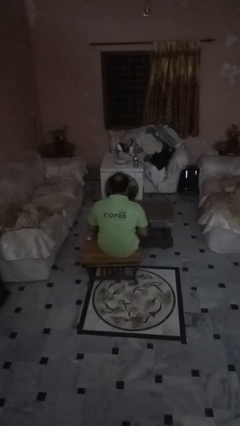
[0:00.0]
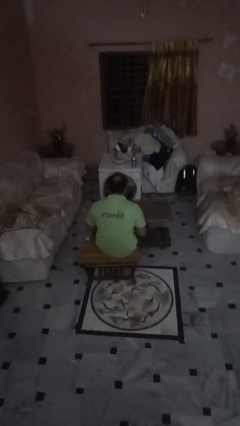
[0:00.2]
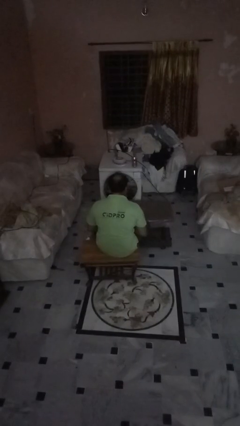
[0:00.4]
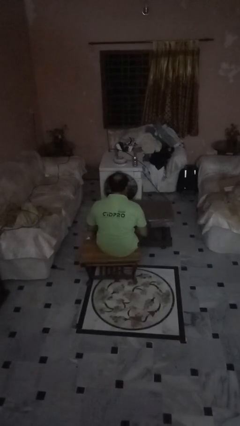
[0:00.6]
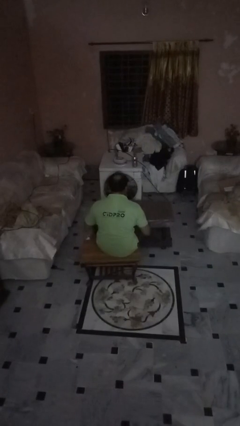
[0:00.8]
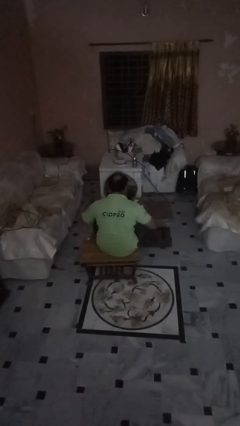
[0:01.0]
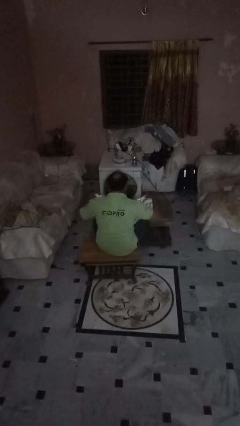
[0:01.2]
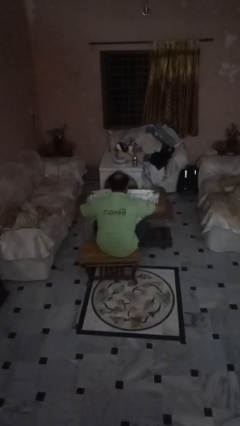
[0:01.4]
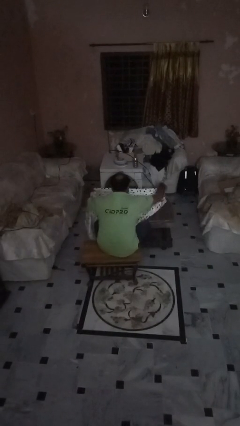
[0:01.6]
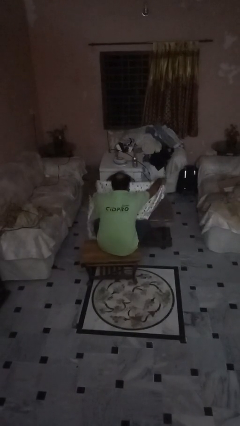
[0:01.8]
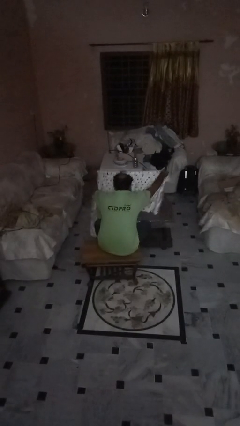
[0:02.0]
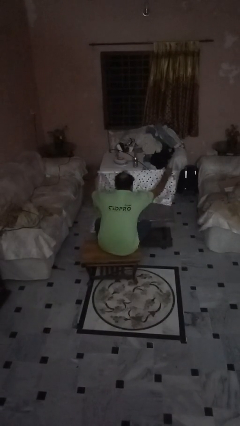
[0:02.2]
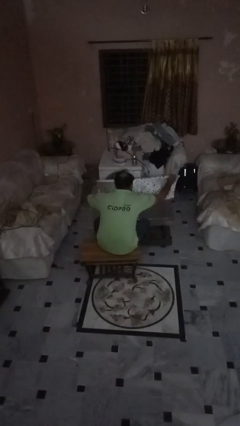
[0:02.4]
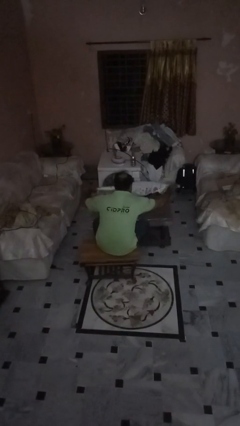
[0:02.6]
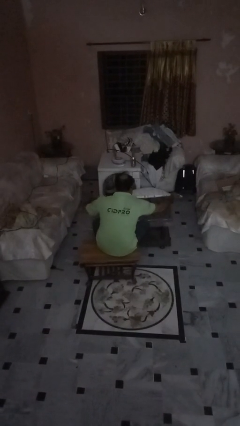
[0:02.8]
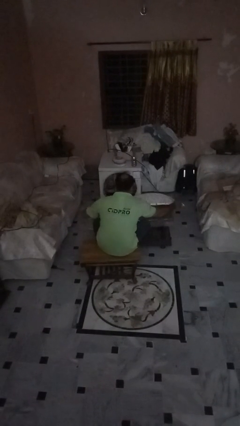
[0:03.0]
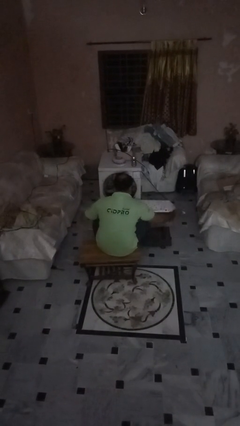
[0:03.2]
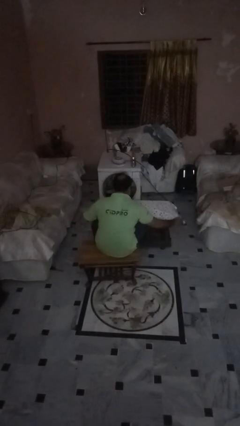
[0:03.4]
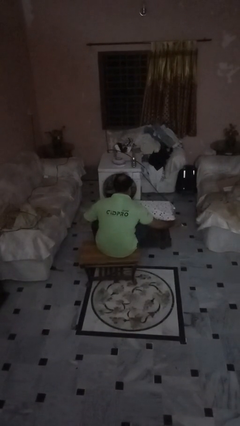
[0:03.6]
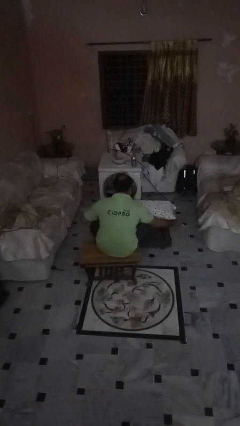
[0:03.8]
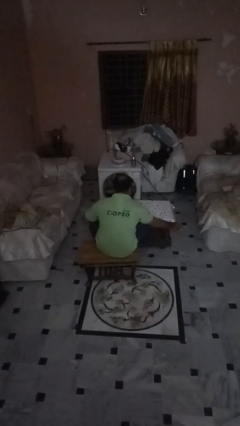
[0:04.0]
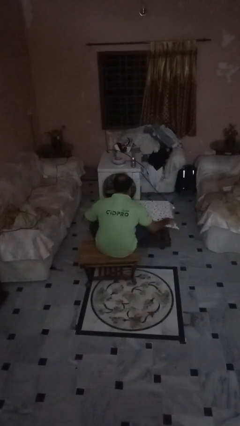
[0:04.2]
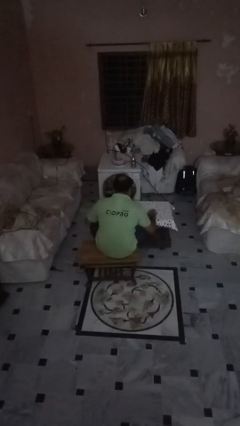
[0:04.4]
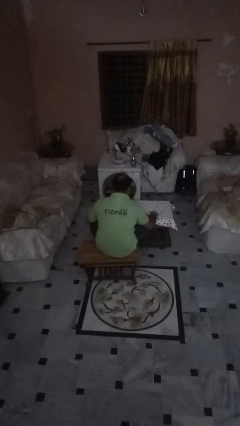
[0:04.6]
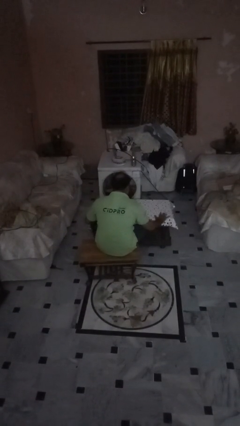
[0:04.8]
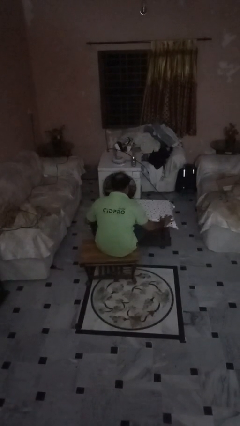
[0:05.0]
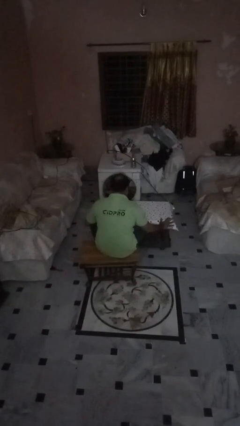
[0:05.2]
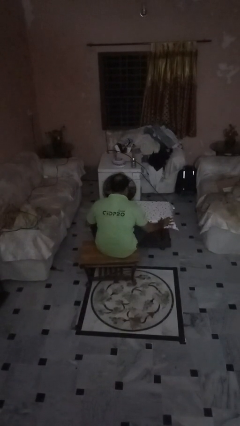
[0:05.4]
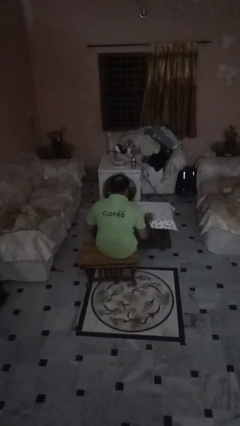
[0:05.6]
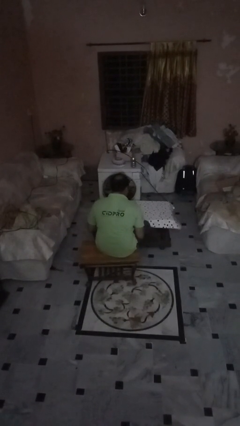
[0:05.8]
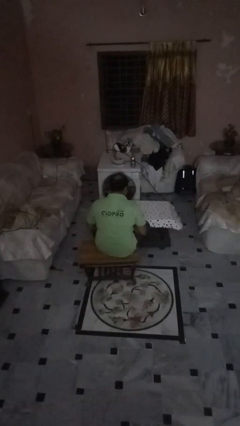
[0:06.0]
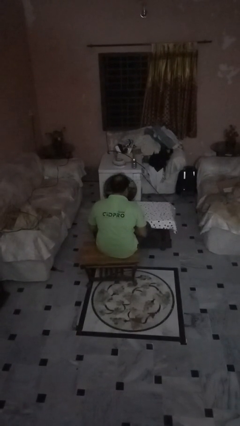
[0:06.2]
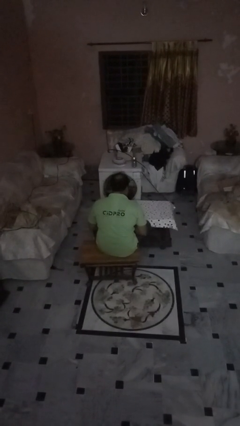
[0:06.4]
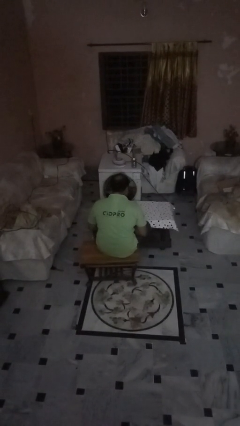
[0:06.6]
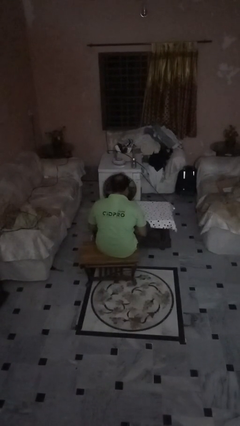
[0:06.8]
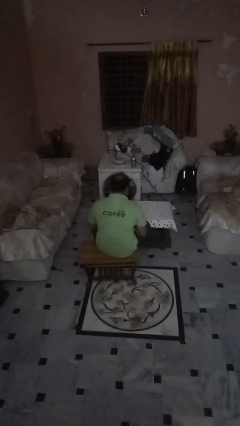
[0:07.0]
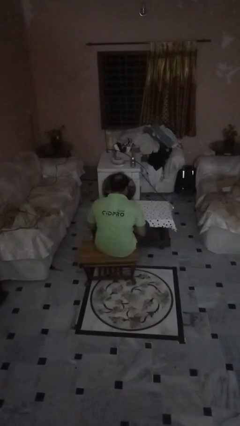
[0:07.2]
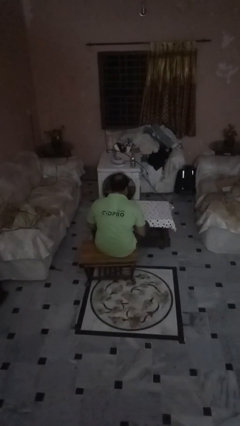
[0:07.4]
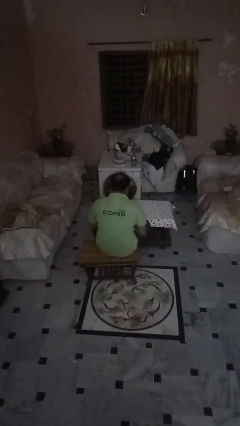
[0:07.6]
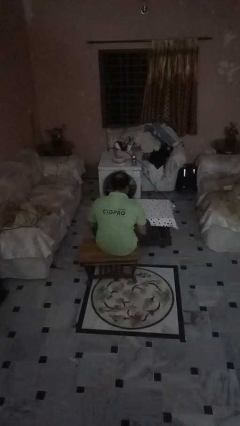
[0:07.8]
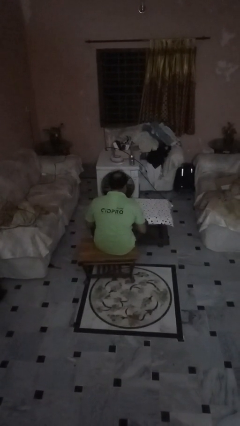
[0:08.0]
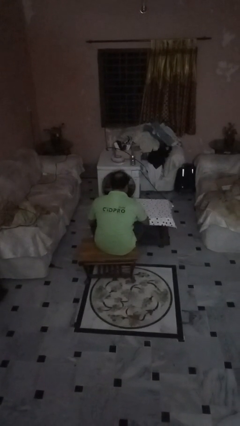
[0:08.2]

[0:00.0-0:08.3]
person spreads tablecloth

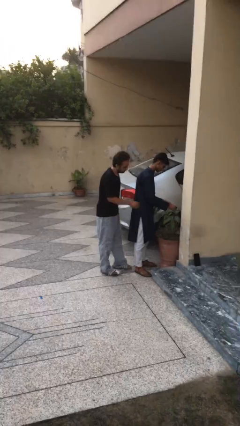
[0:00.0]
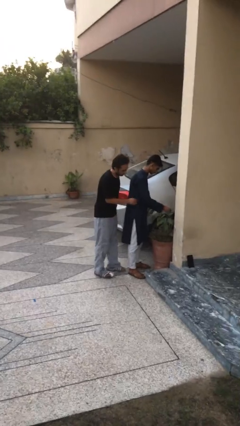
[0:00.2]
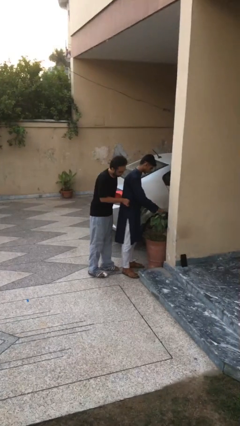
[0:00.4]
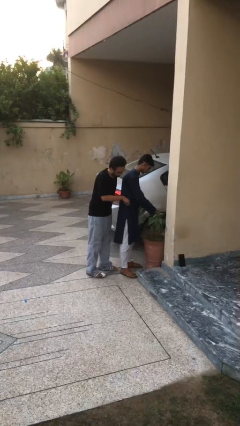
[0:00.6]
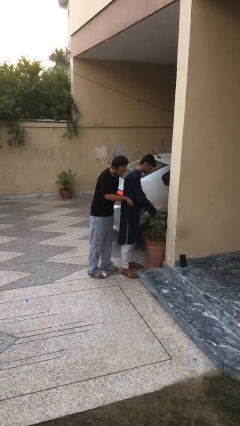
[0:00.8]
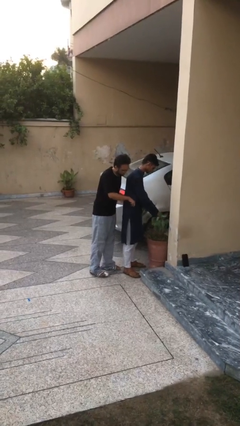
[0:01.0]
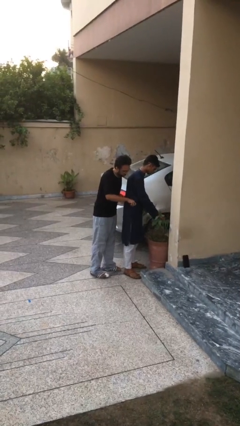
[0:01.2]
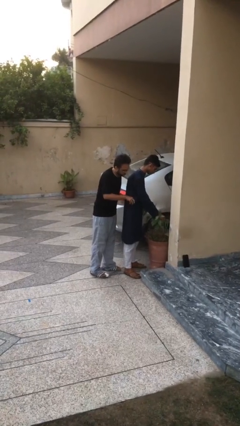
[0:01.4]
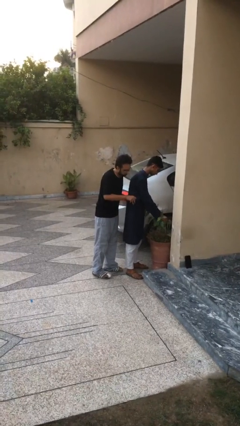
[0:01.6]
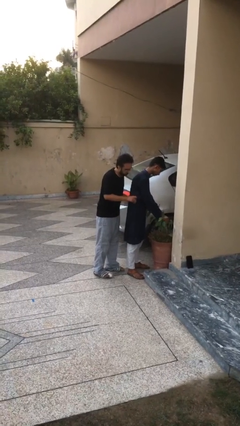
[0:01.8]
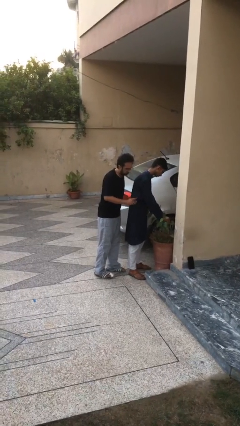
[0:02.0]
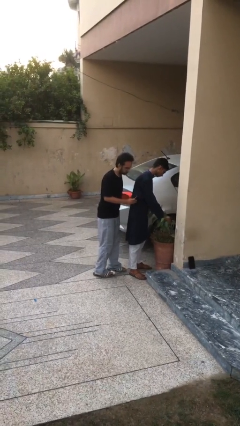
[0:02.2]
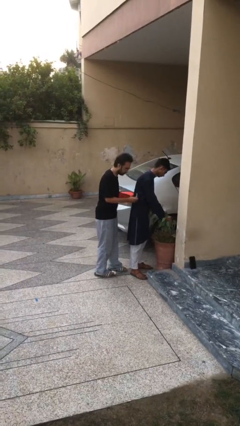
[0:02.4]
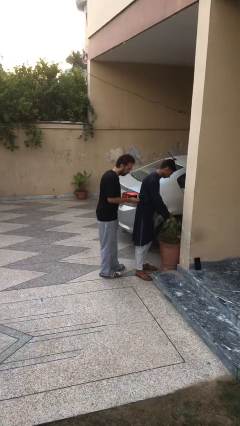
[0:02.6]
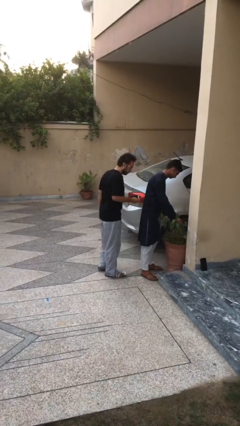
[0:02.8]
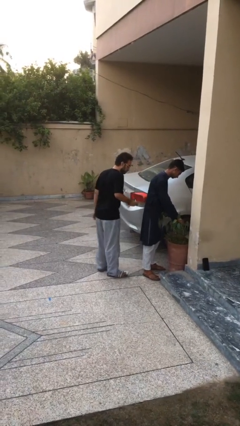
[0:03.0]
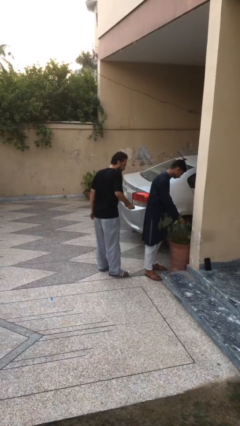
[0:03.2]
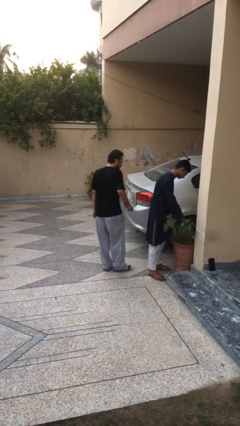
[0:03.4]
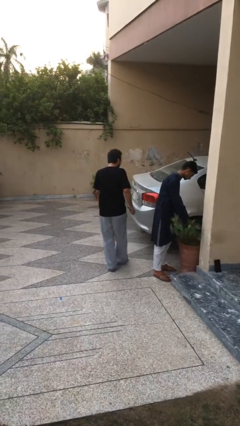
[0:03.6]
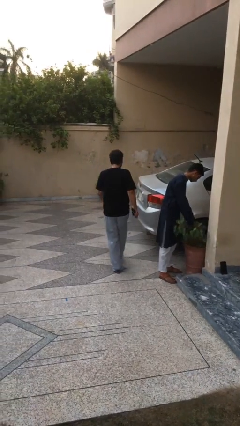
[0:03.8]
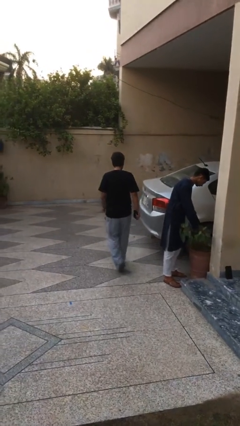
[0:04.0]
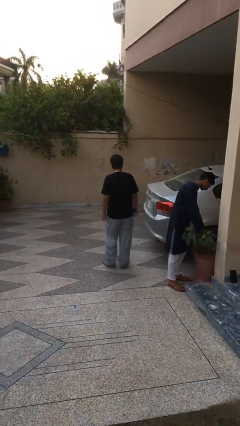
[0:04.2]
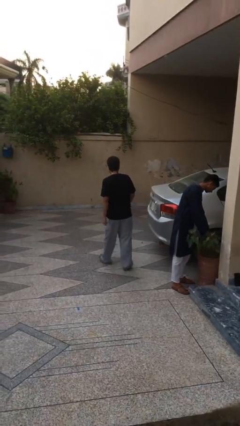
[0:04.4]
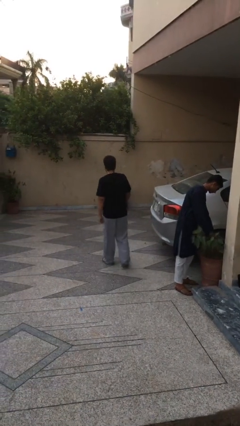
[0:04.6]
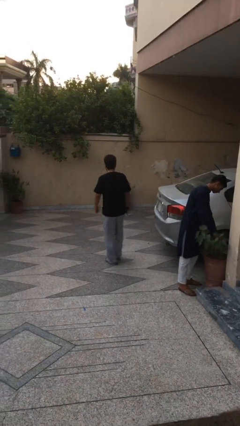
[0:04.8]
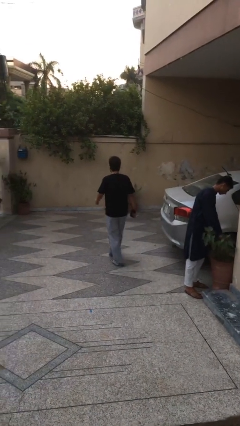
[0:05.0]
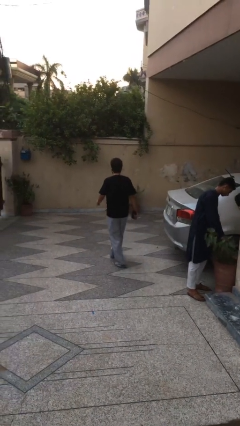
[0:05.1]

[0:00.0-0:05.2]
person steals object from person

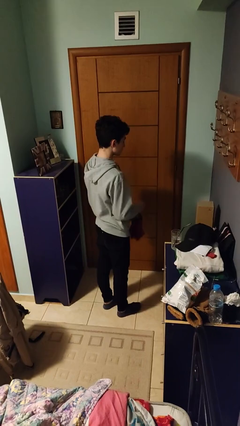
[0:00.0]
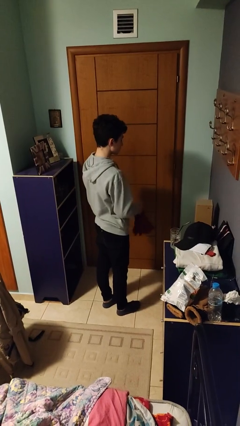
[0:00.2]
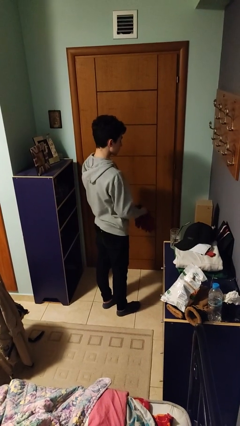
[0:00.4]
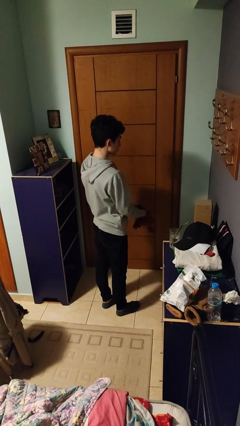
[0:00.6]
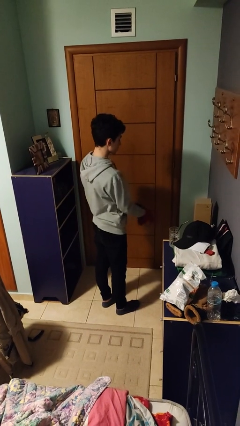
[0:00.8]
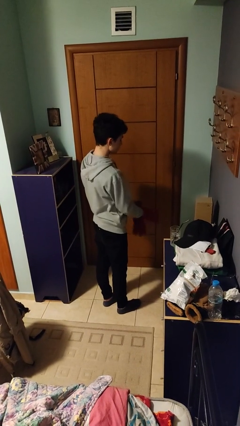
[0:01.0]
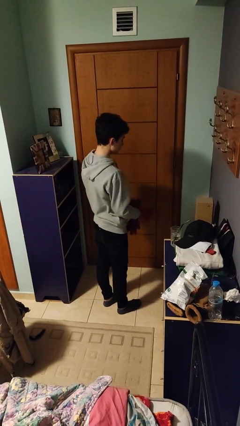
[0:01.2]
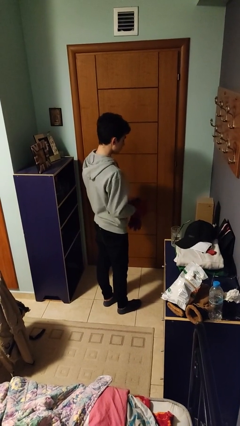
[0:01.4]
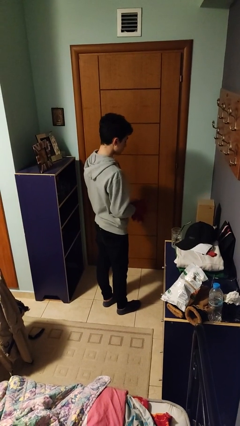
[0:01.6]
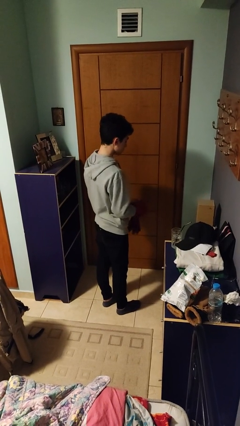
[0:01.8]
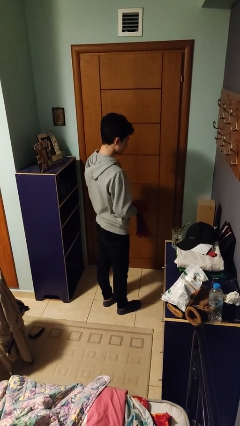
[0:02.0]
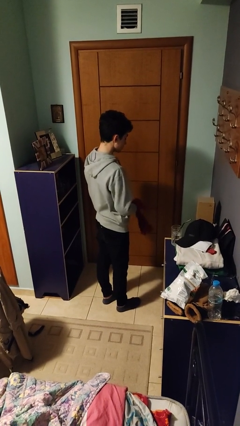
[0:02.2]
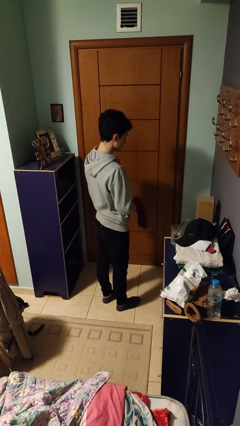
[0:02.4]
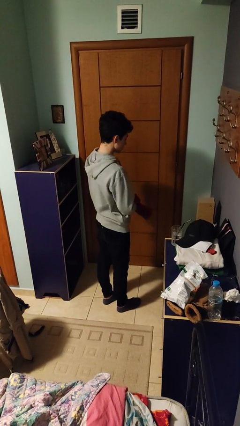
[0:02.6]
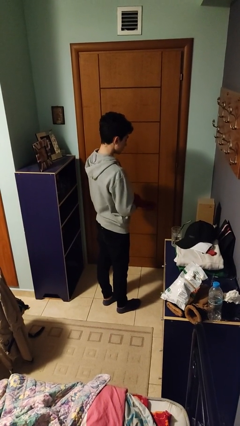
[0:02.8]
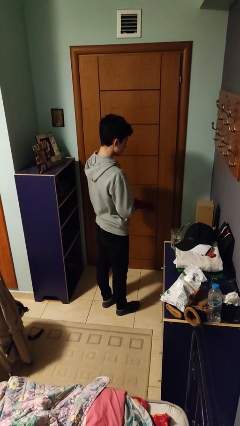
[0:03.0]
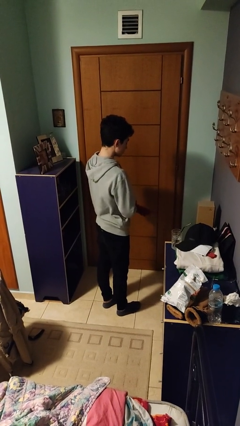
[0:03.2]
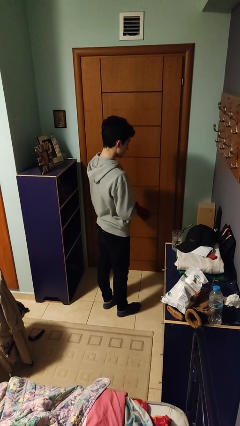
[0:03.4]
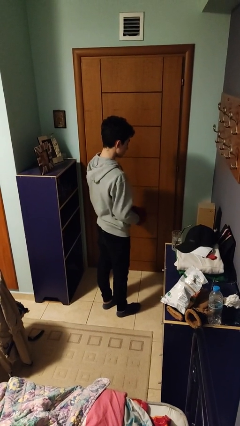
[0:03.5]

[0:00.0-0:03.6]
person puts on gloves

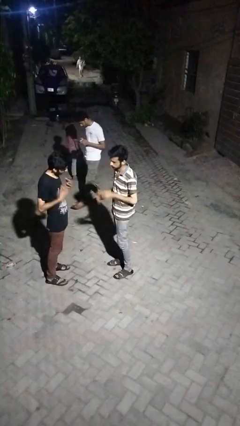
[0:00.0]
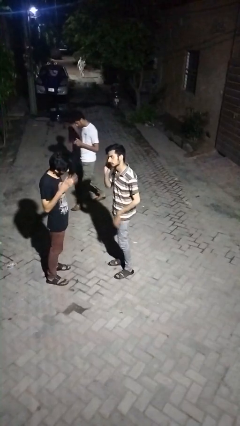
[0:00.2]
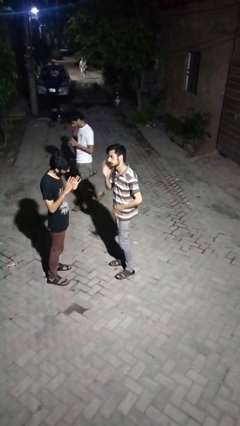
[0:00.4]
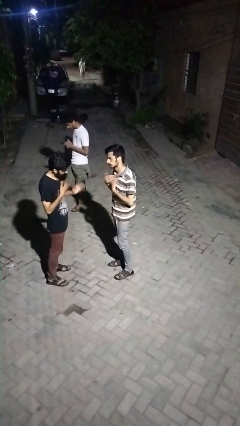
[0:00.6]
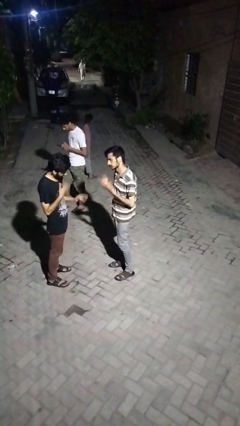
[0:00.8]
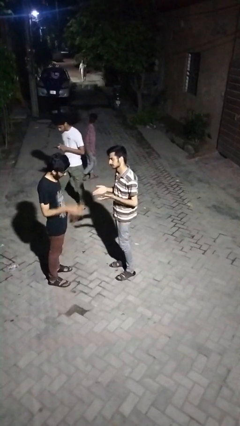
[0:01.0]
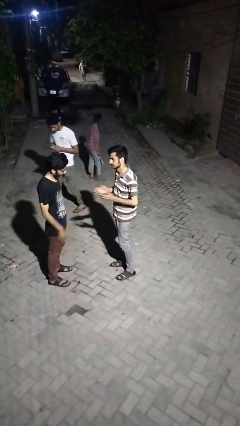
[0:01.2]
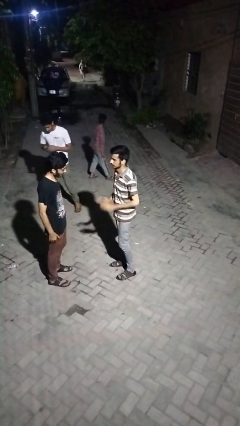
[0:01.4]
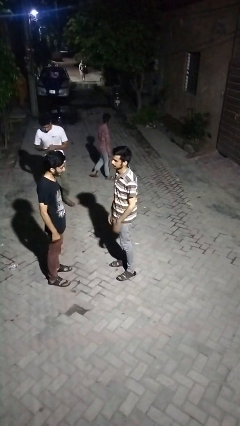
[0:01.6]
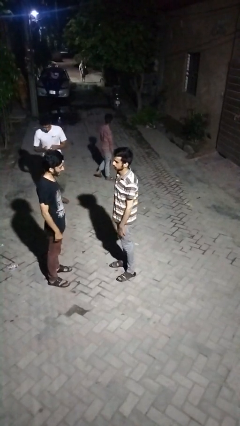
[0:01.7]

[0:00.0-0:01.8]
person talks to person
